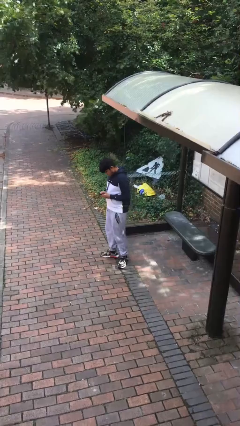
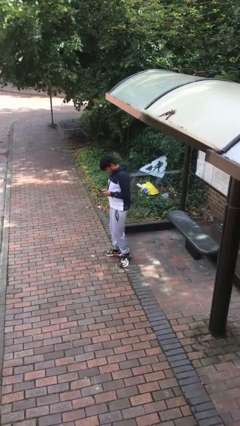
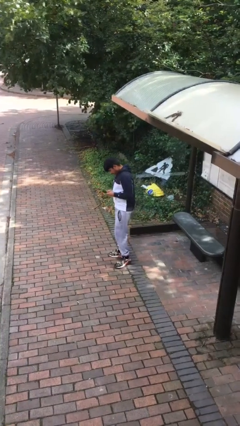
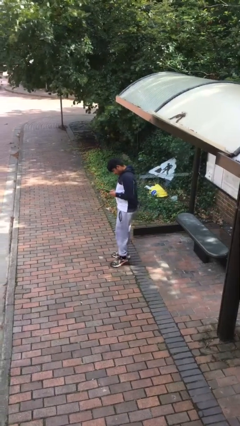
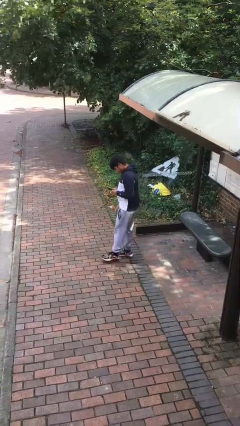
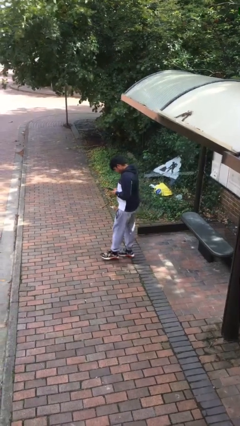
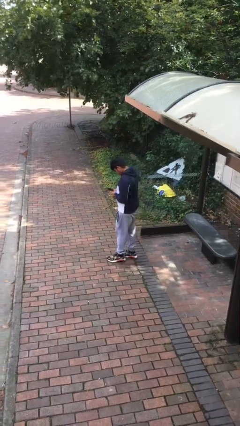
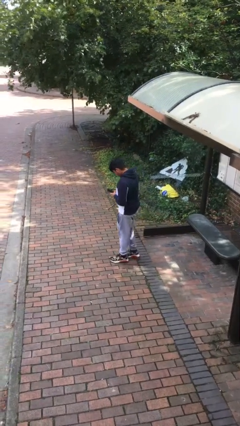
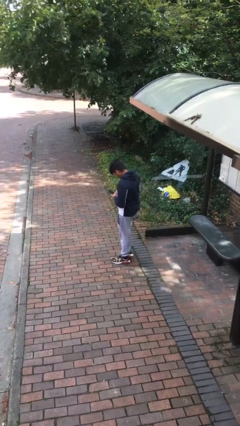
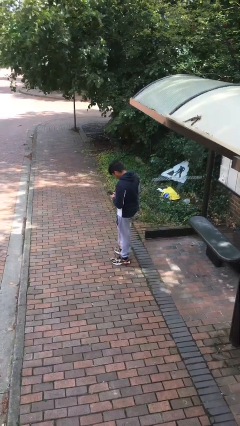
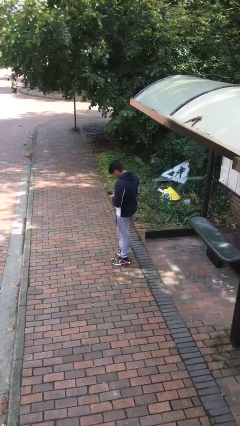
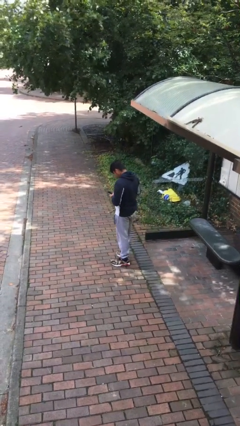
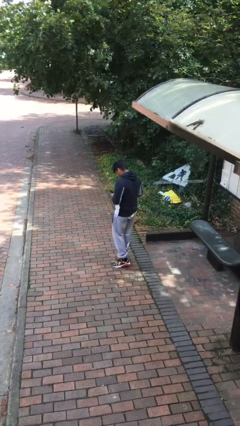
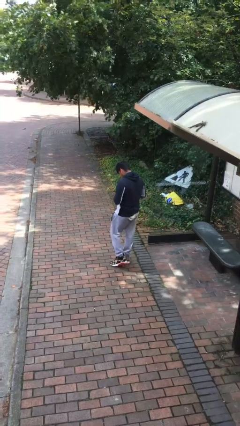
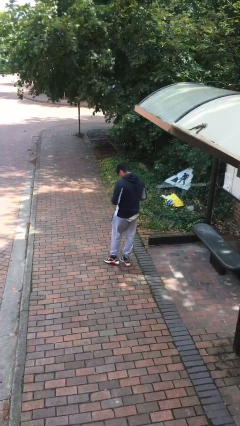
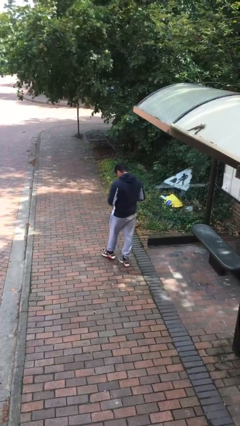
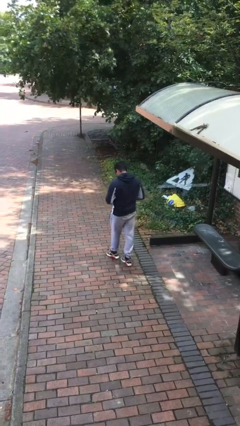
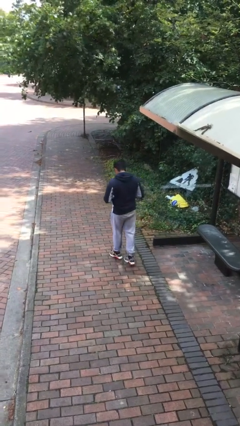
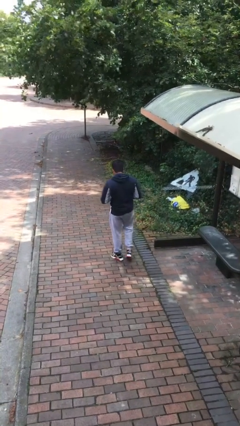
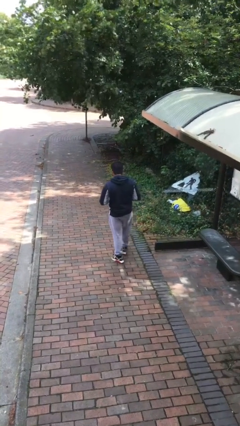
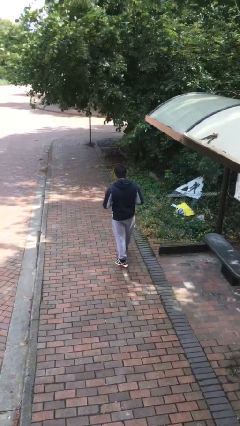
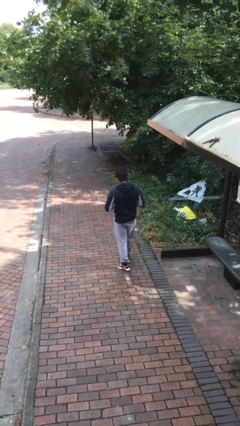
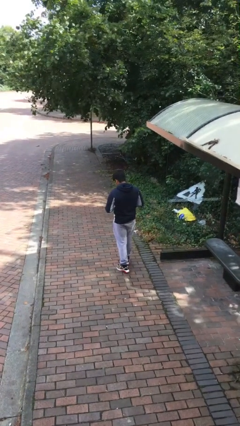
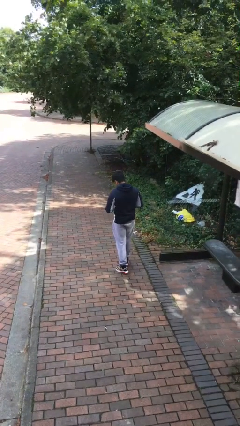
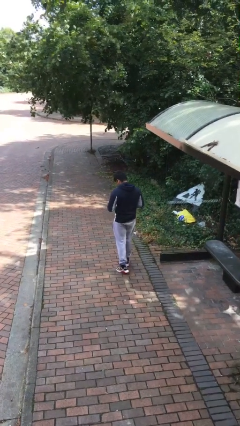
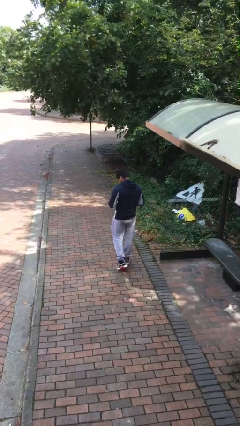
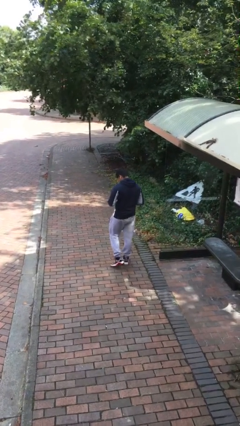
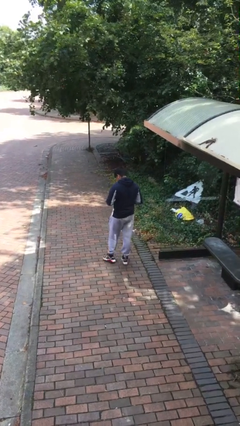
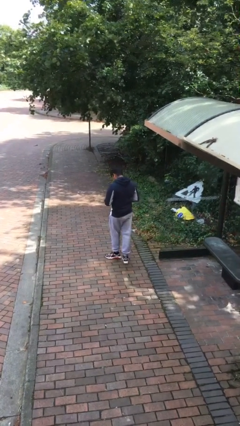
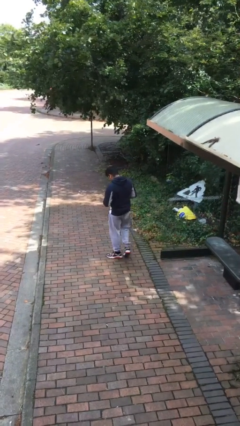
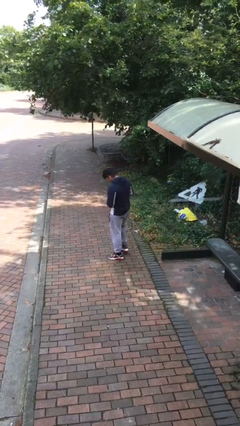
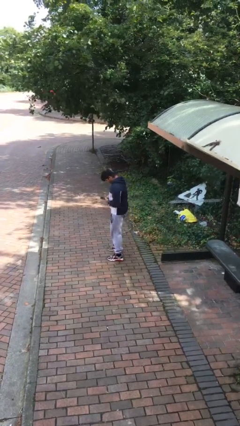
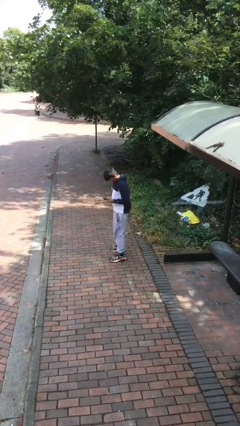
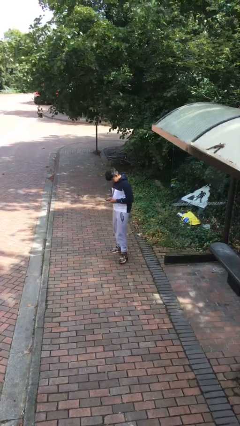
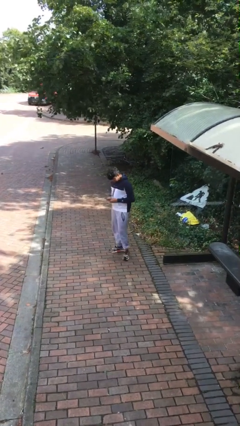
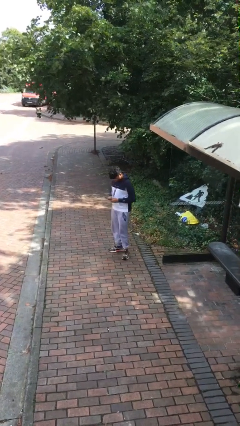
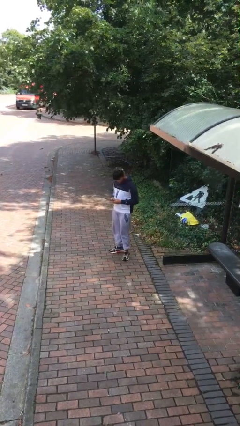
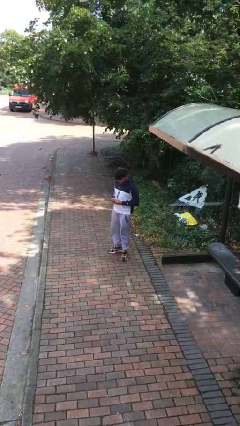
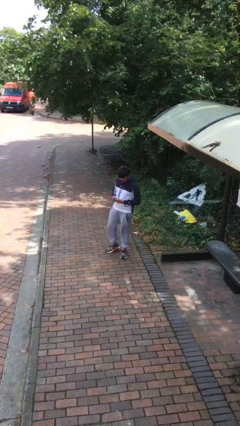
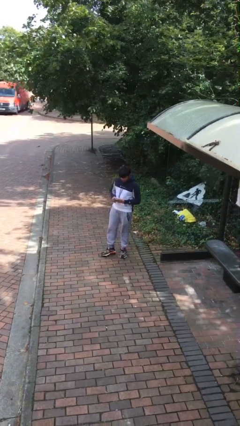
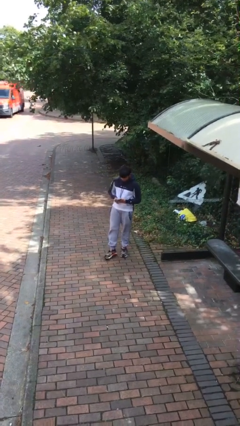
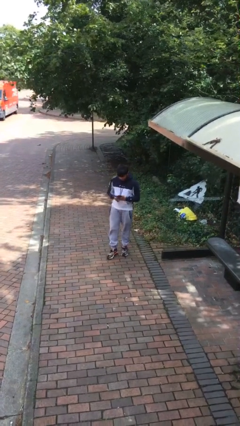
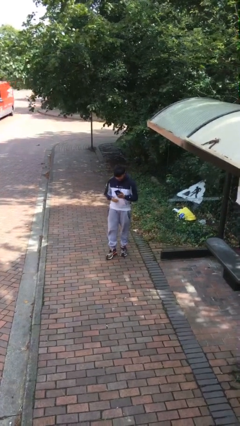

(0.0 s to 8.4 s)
person texts on phone

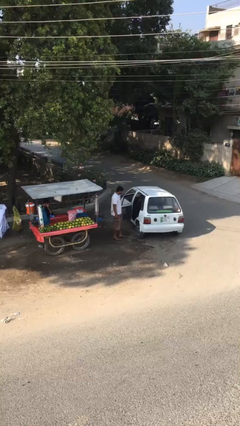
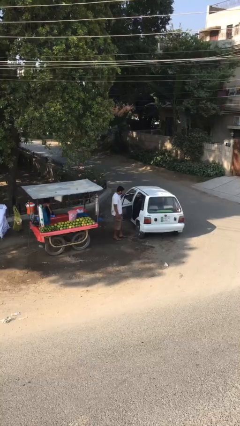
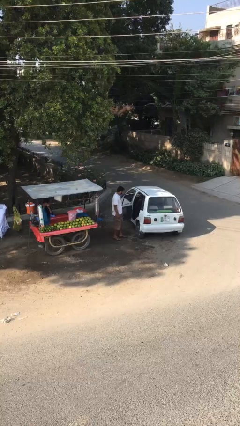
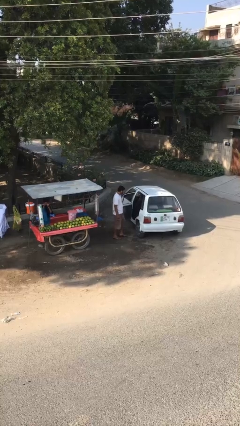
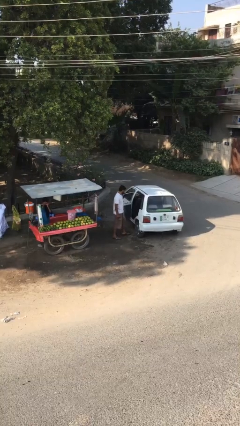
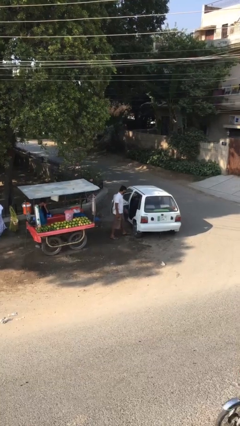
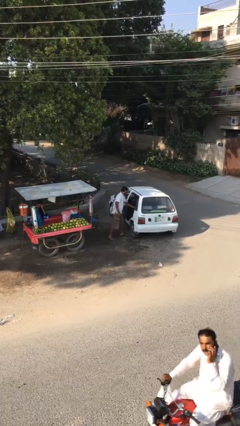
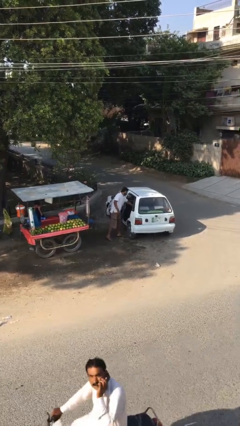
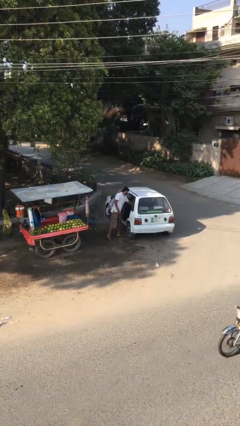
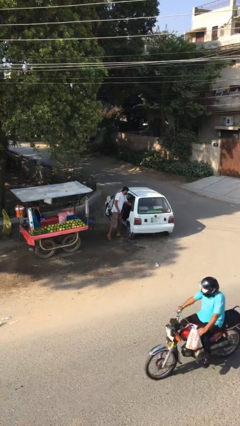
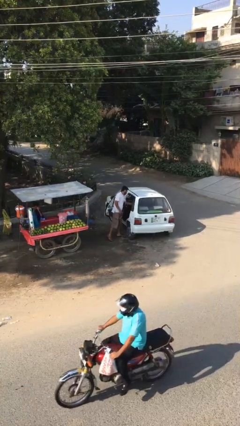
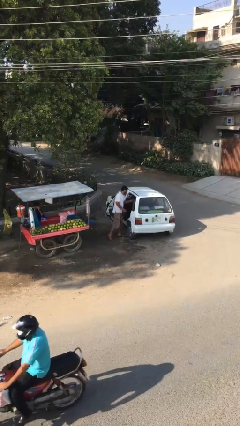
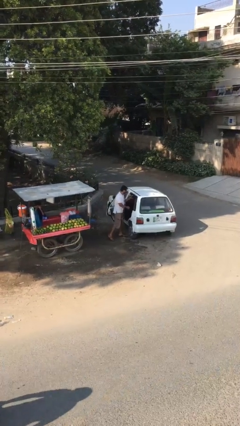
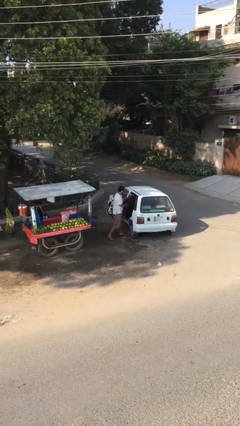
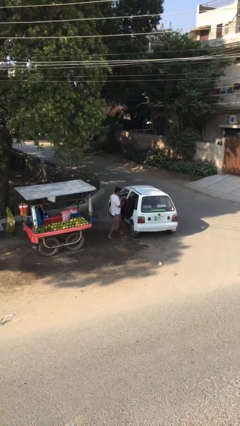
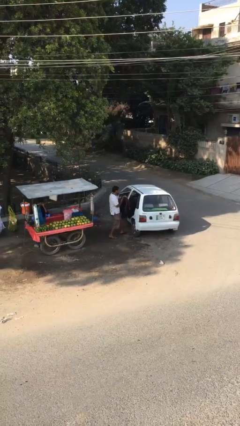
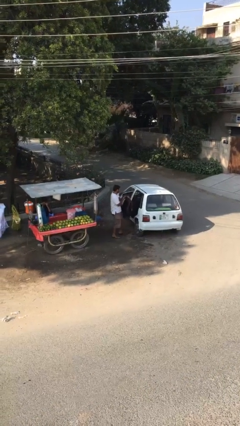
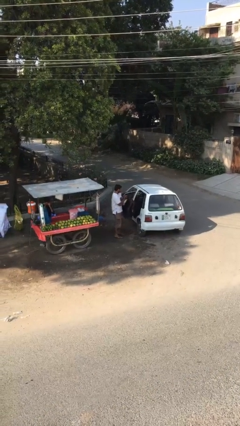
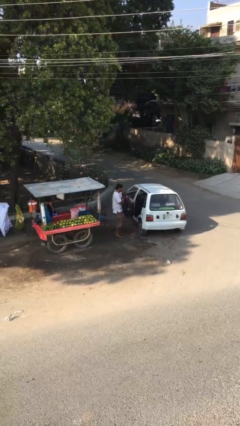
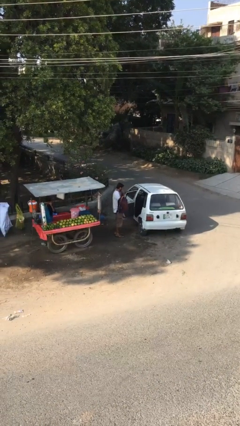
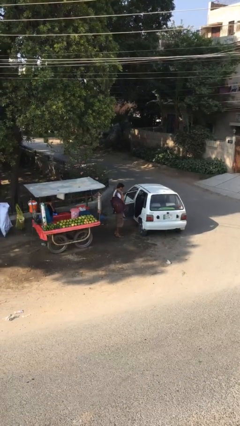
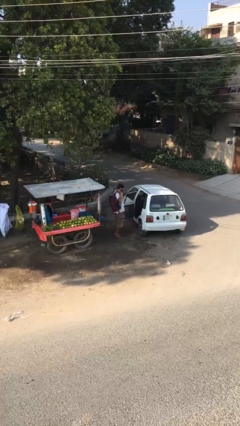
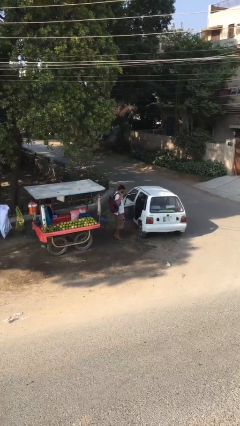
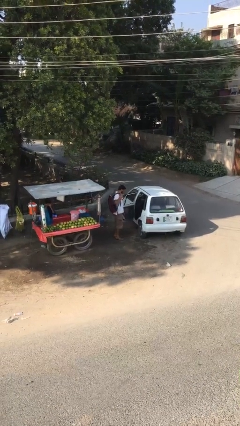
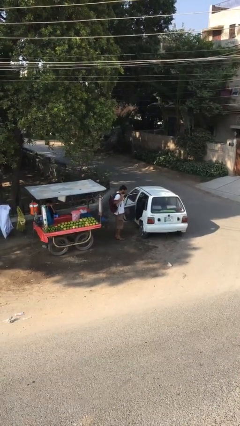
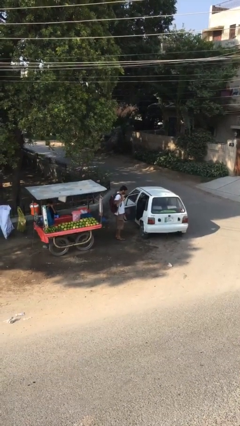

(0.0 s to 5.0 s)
person unloads car

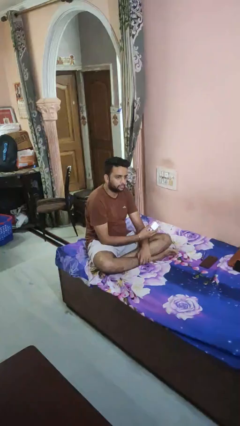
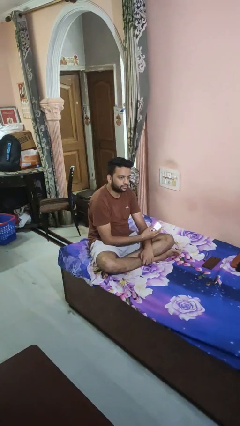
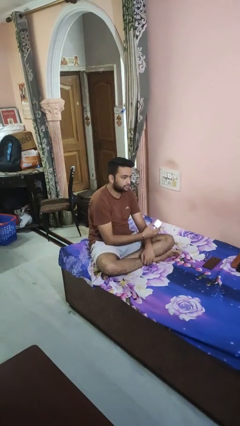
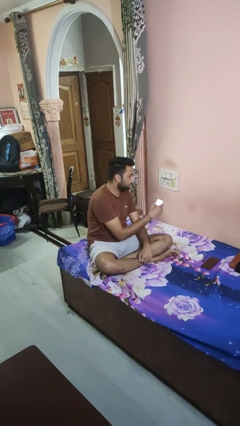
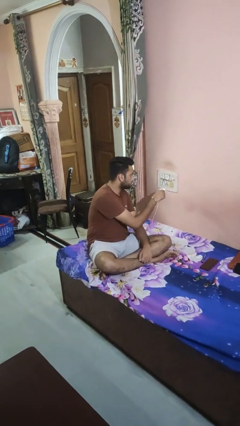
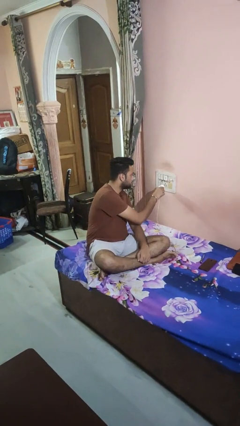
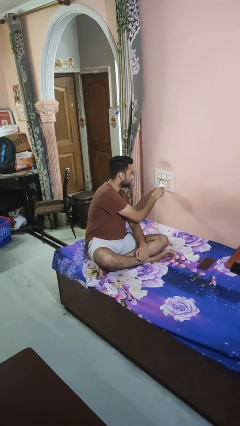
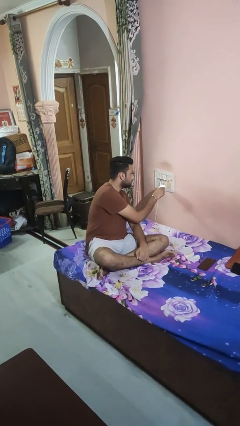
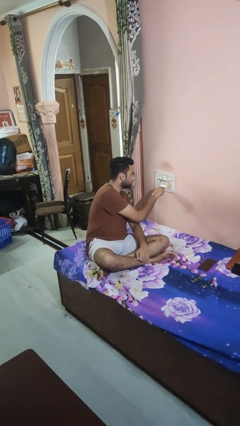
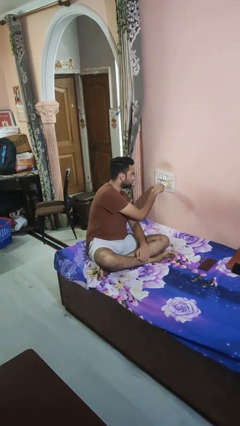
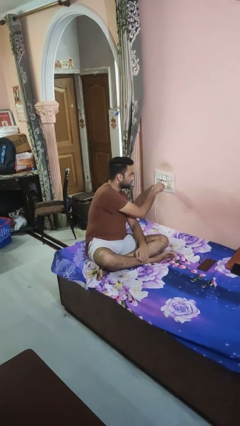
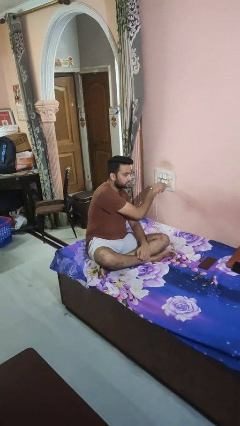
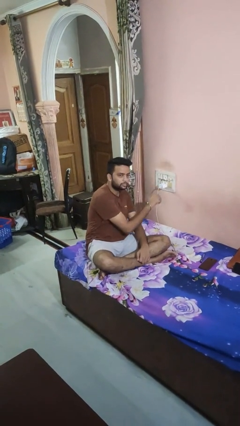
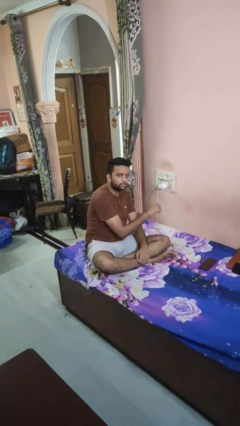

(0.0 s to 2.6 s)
person plugs into electrical socket

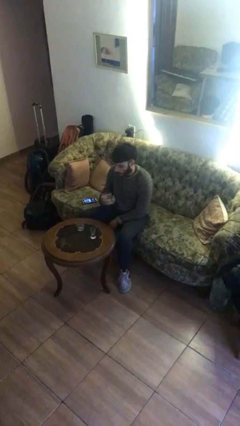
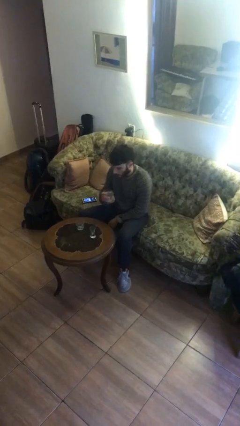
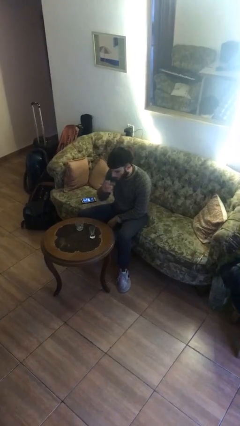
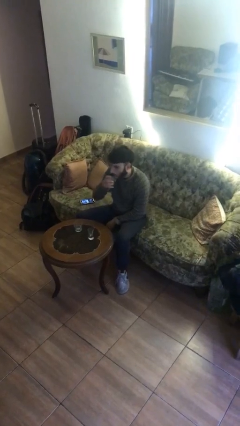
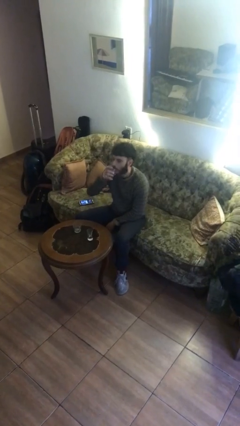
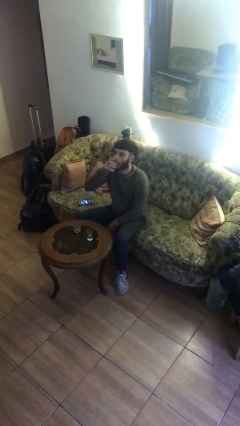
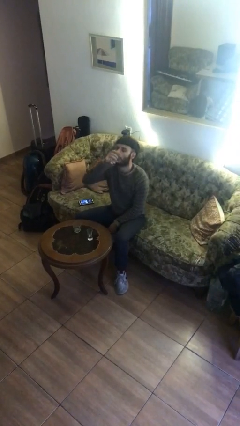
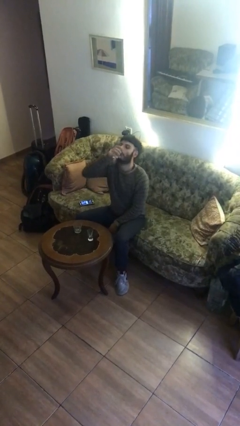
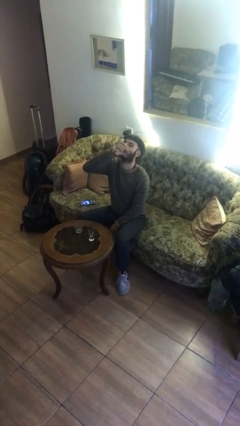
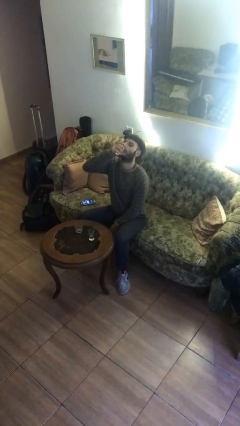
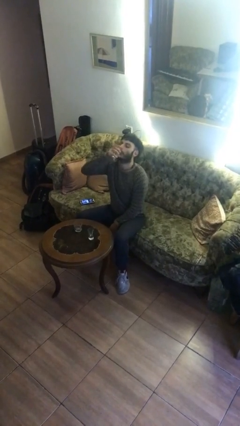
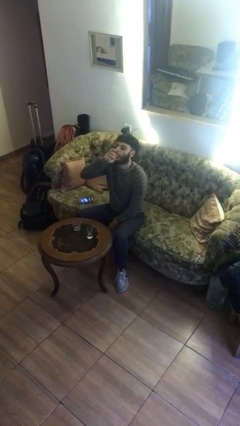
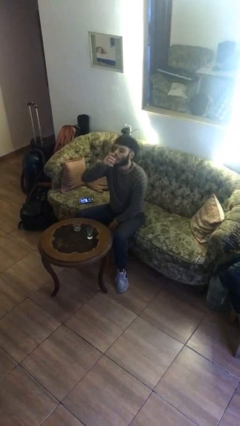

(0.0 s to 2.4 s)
person drinks from shotglass
